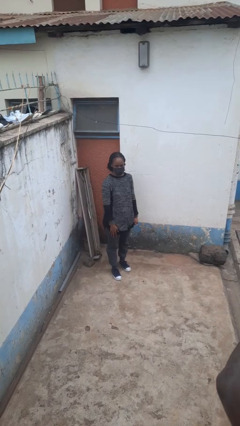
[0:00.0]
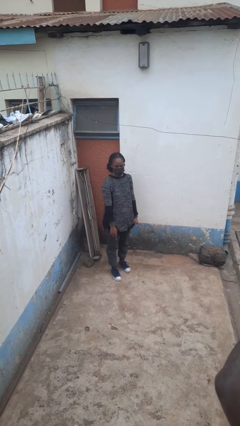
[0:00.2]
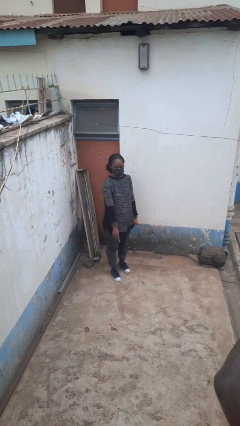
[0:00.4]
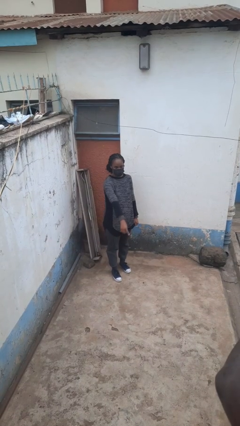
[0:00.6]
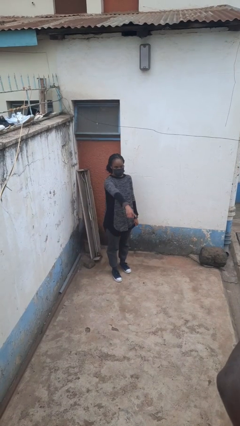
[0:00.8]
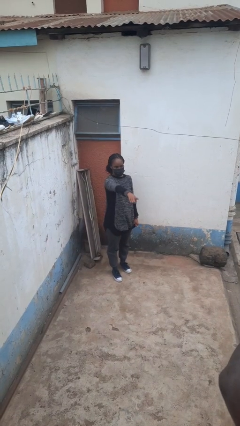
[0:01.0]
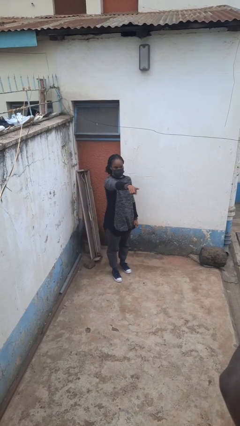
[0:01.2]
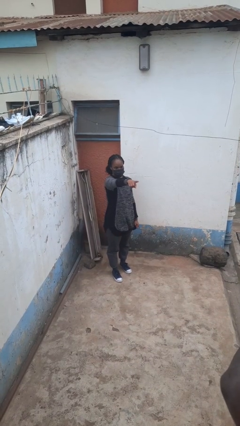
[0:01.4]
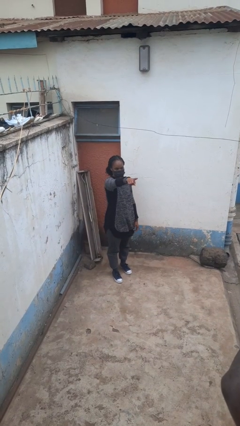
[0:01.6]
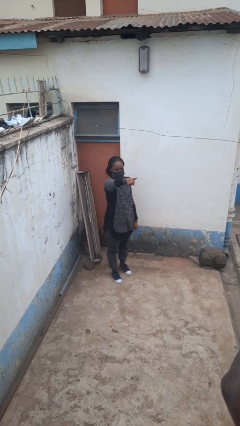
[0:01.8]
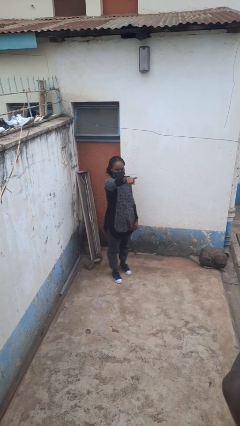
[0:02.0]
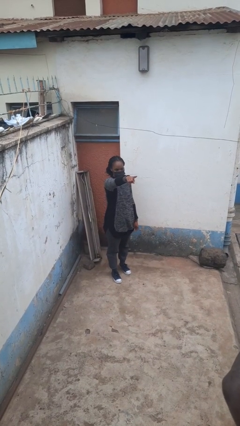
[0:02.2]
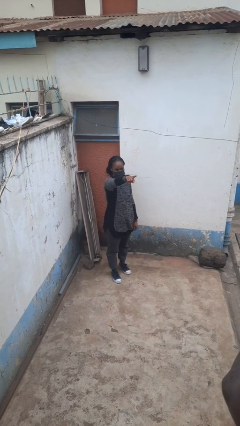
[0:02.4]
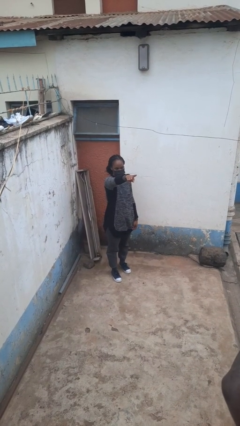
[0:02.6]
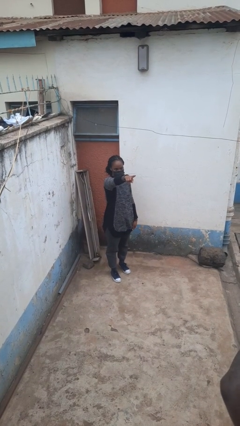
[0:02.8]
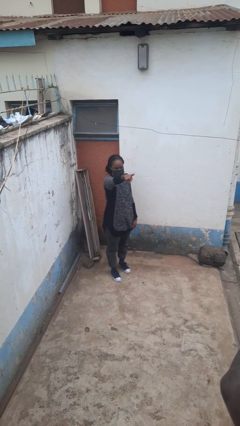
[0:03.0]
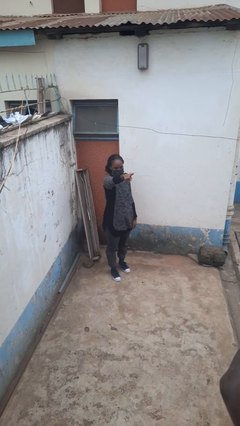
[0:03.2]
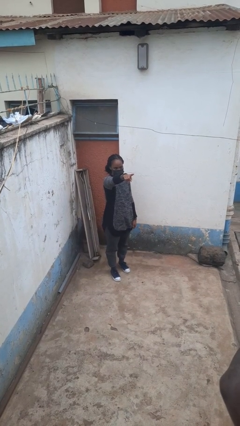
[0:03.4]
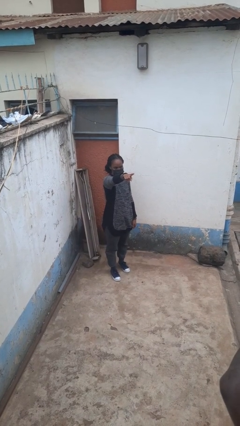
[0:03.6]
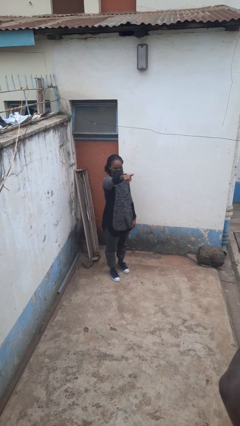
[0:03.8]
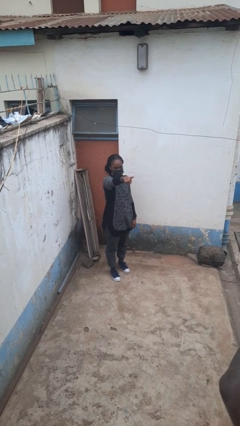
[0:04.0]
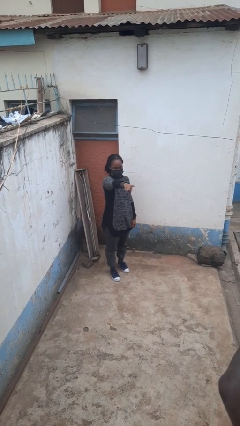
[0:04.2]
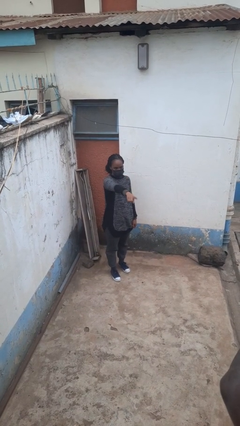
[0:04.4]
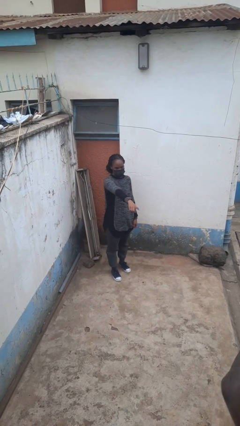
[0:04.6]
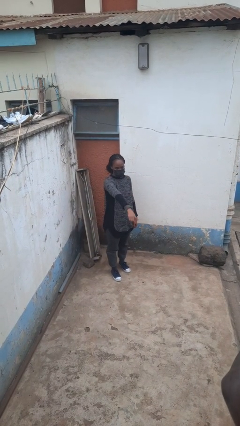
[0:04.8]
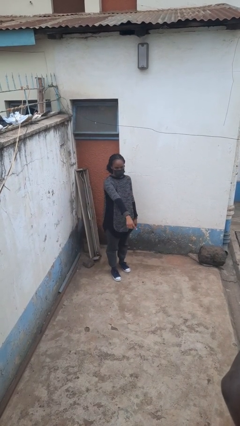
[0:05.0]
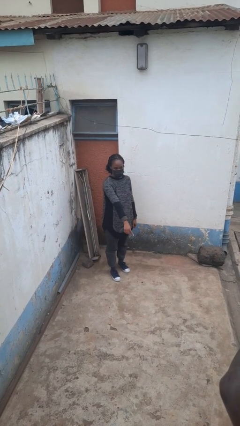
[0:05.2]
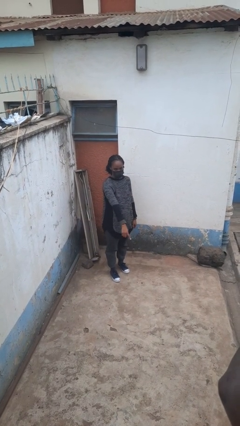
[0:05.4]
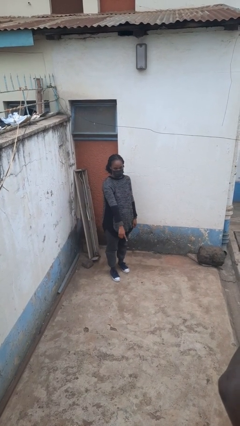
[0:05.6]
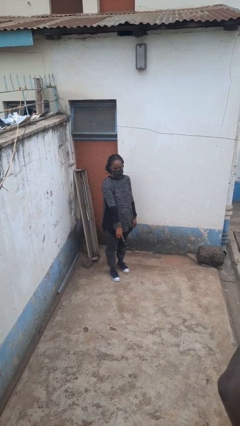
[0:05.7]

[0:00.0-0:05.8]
person points at person

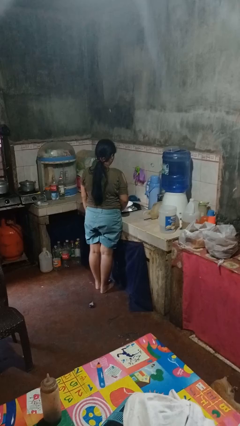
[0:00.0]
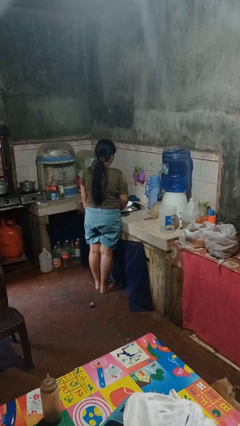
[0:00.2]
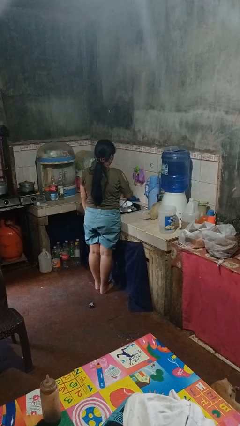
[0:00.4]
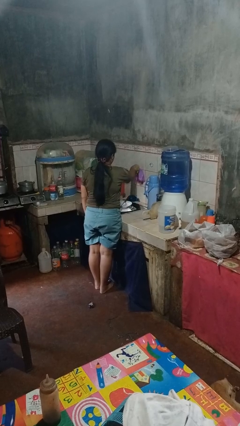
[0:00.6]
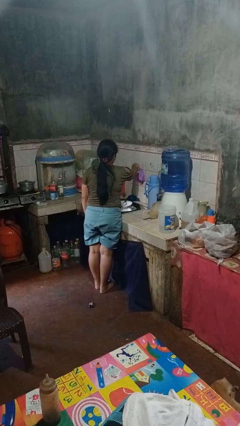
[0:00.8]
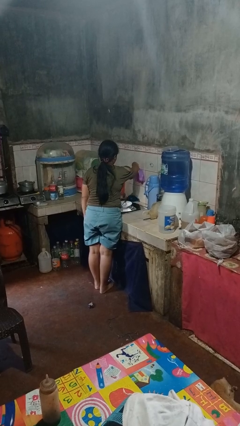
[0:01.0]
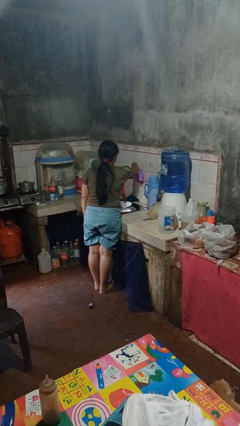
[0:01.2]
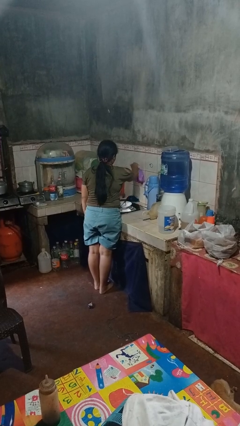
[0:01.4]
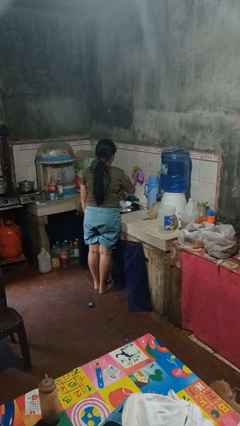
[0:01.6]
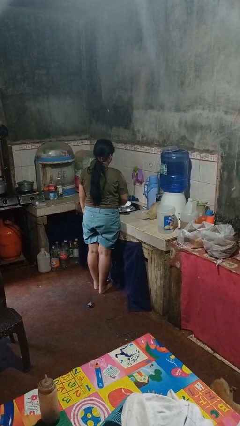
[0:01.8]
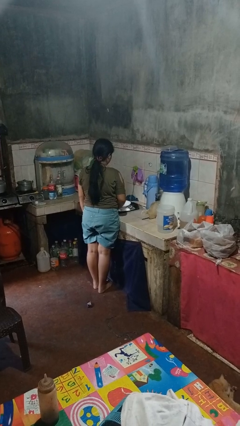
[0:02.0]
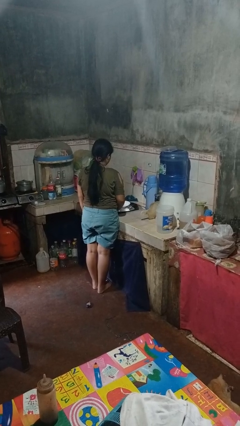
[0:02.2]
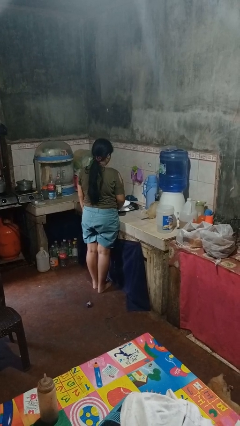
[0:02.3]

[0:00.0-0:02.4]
person turns on faucet

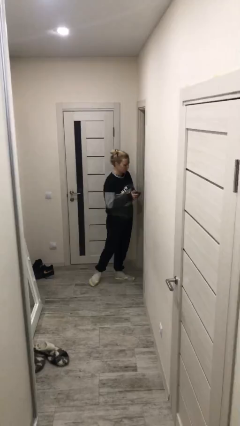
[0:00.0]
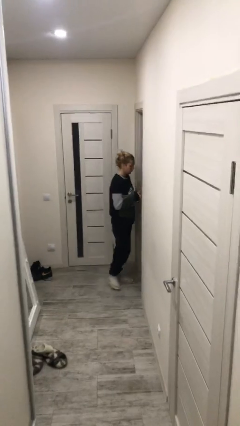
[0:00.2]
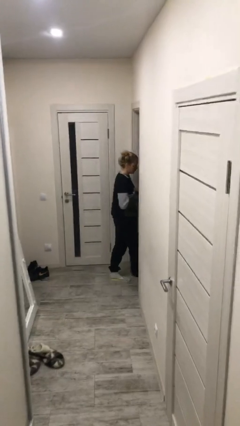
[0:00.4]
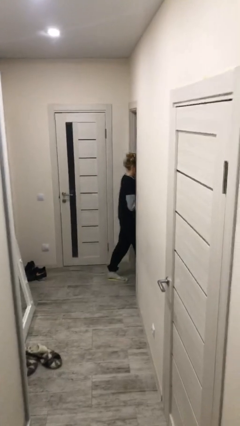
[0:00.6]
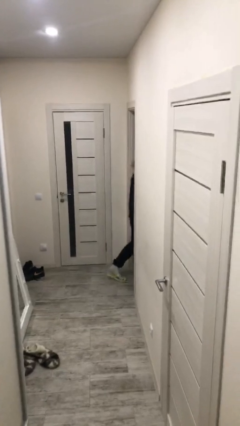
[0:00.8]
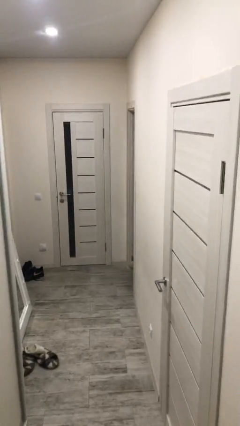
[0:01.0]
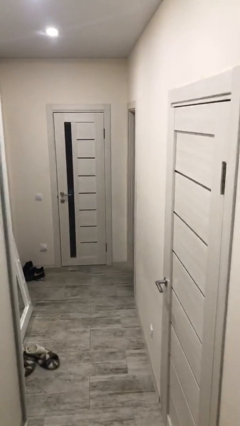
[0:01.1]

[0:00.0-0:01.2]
person exits scene through structure

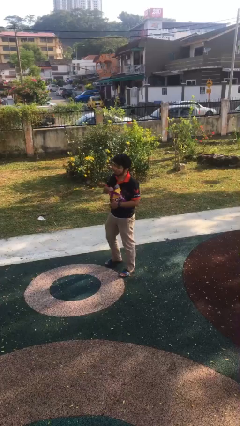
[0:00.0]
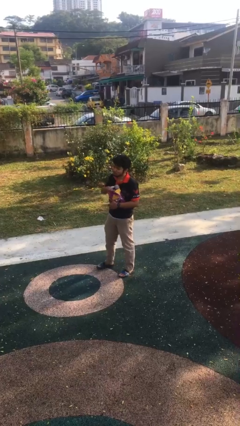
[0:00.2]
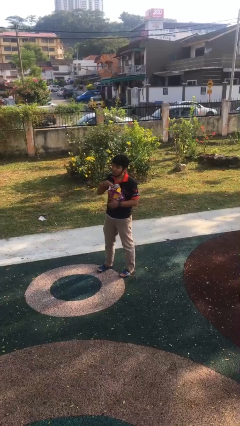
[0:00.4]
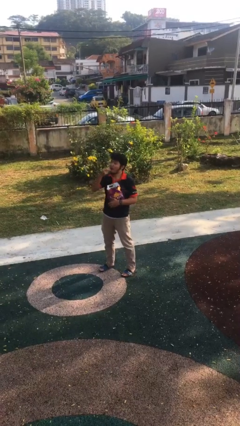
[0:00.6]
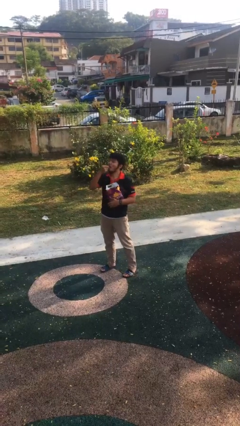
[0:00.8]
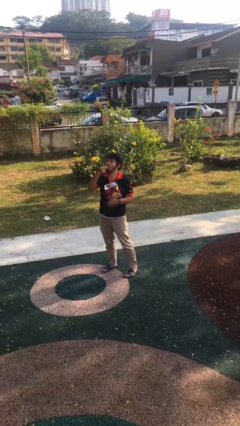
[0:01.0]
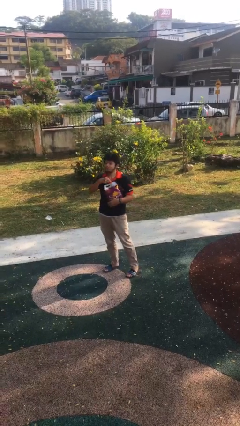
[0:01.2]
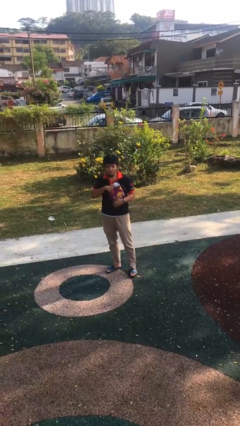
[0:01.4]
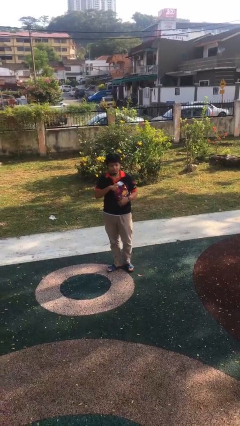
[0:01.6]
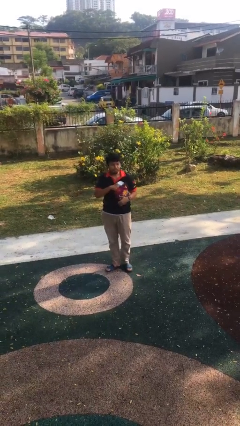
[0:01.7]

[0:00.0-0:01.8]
person eats snack from bag

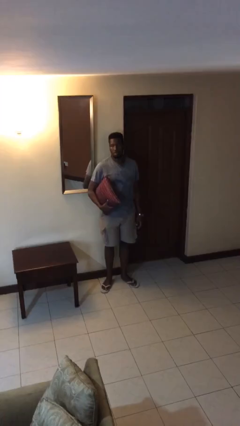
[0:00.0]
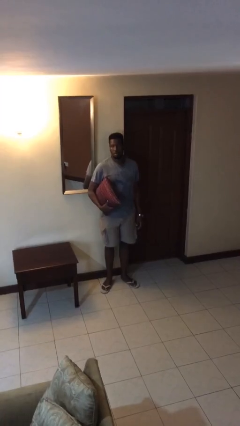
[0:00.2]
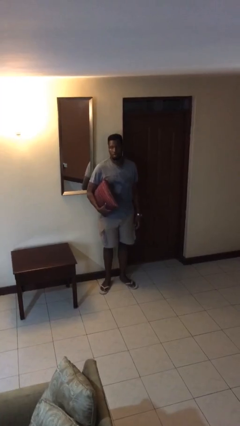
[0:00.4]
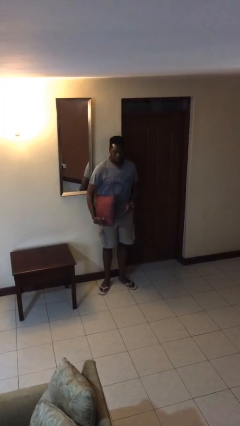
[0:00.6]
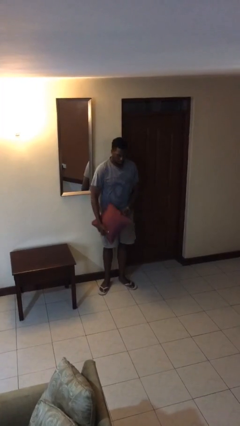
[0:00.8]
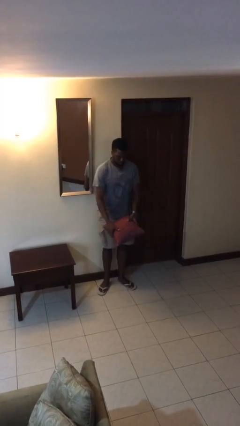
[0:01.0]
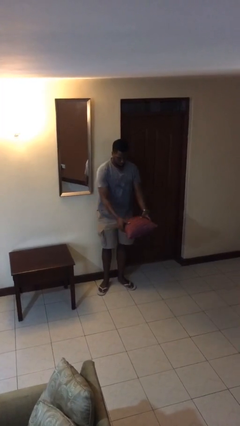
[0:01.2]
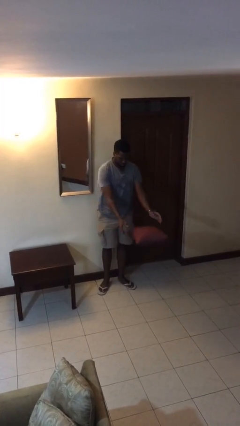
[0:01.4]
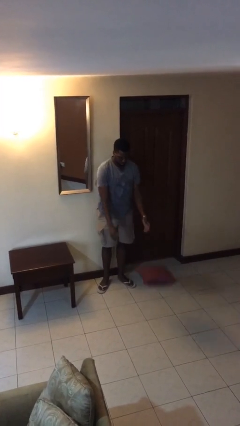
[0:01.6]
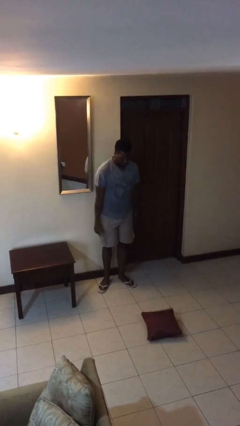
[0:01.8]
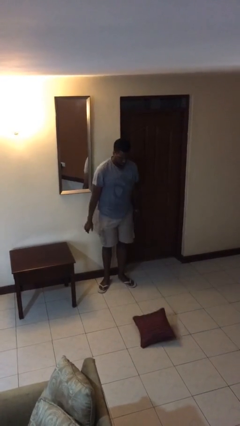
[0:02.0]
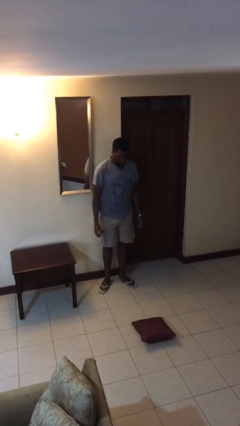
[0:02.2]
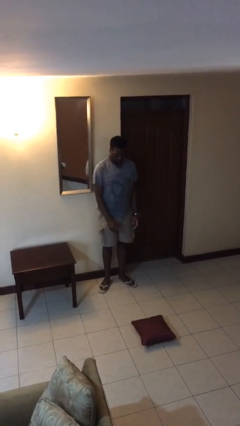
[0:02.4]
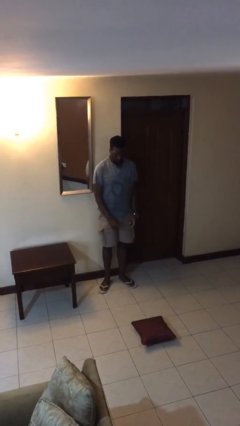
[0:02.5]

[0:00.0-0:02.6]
person throws object to ground

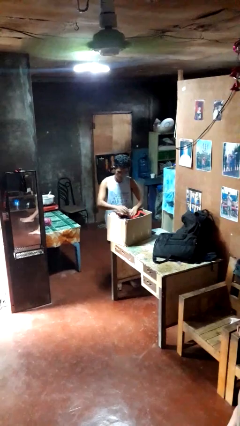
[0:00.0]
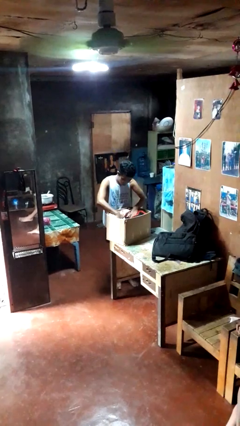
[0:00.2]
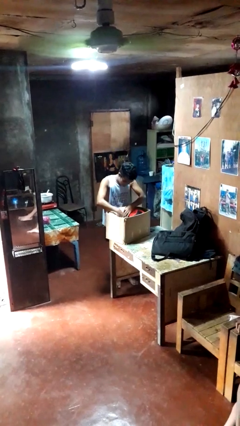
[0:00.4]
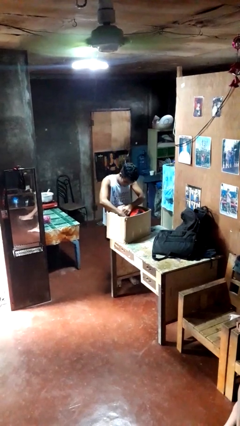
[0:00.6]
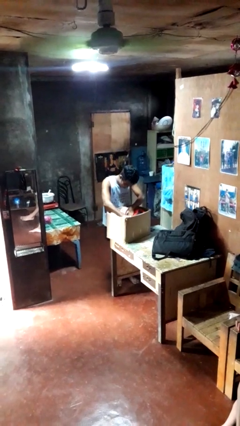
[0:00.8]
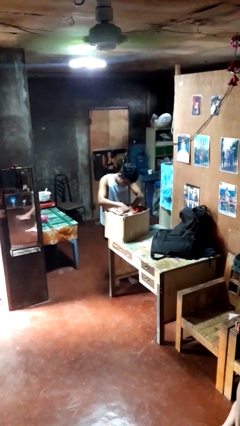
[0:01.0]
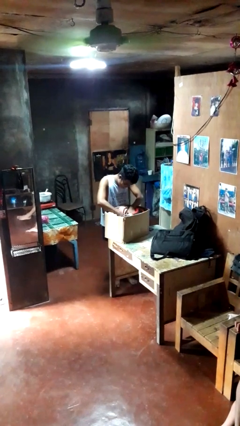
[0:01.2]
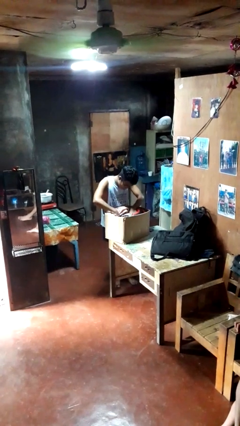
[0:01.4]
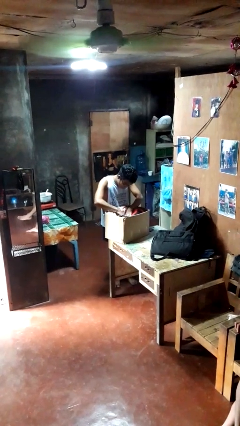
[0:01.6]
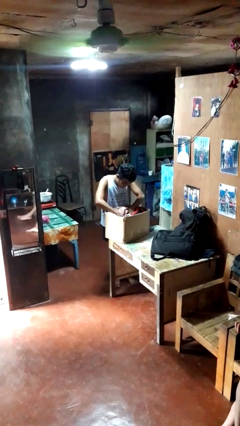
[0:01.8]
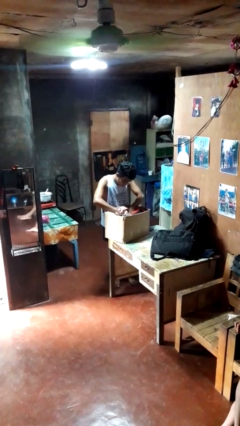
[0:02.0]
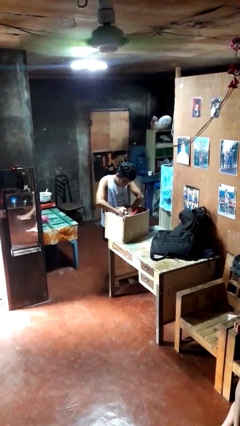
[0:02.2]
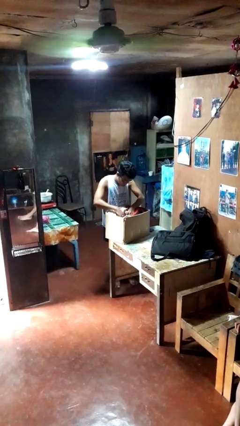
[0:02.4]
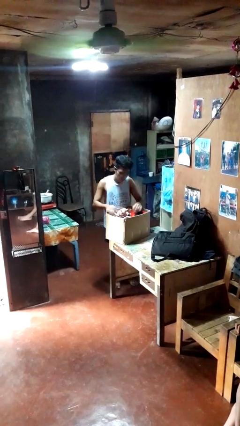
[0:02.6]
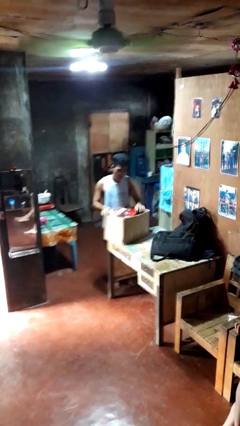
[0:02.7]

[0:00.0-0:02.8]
person searches in box

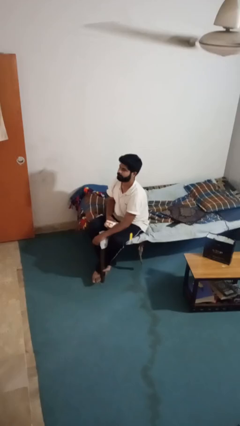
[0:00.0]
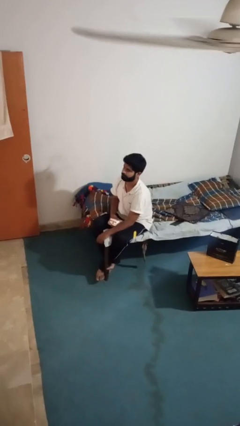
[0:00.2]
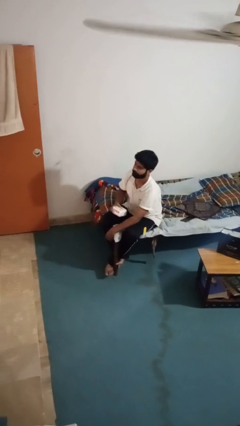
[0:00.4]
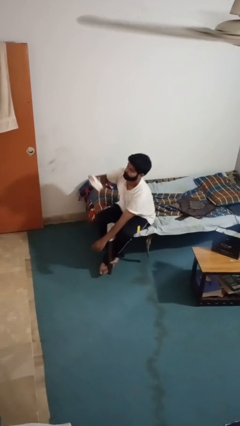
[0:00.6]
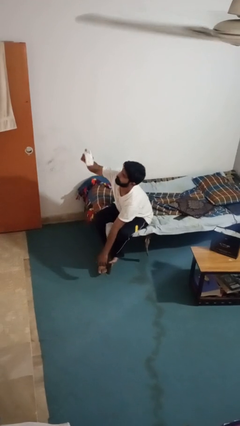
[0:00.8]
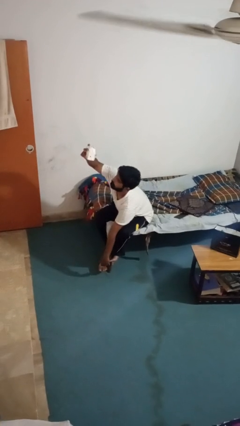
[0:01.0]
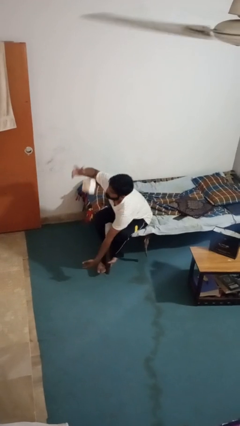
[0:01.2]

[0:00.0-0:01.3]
person drops object
